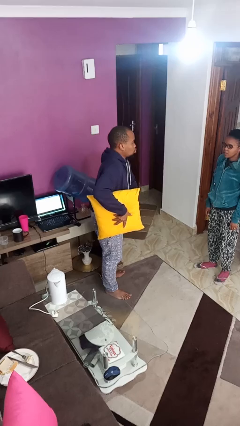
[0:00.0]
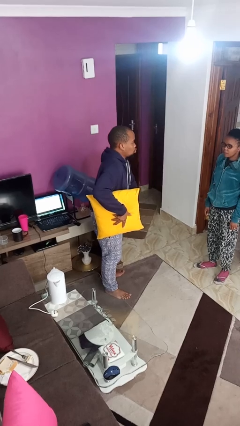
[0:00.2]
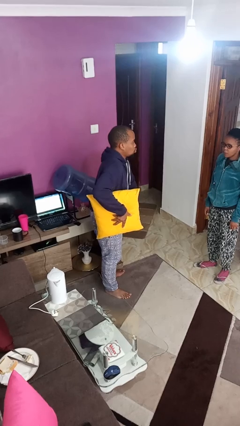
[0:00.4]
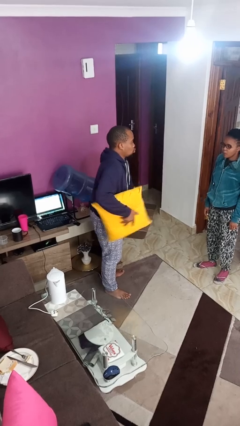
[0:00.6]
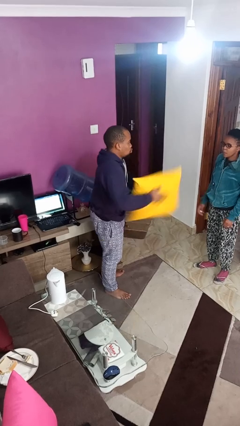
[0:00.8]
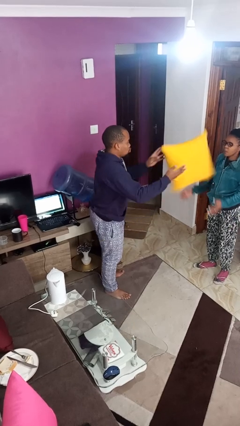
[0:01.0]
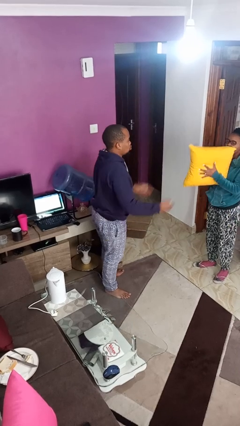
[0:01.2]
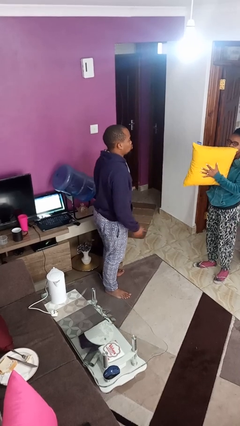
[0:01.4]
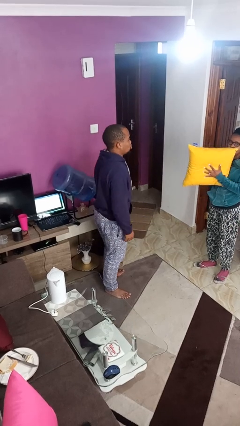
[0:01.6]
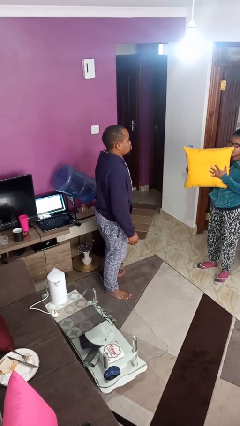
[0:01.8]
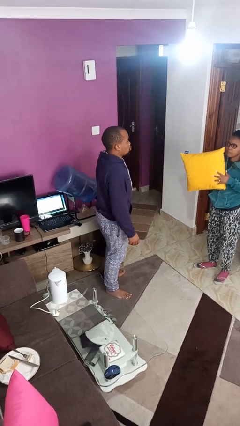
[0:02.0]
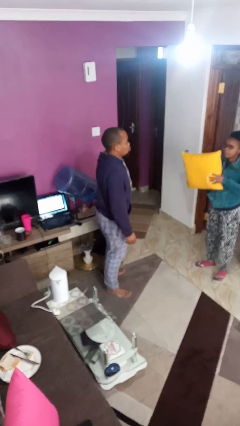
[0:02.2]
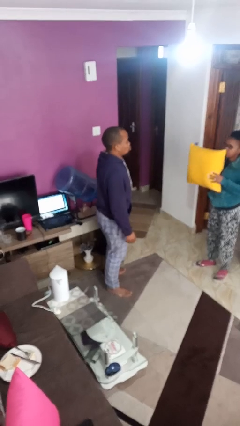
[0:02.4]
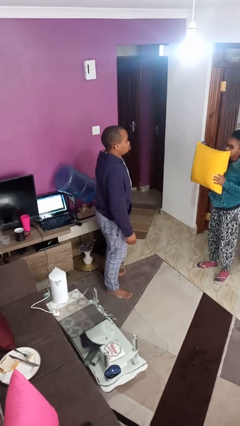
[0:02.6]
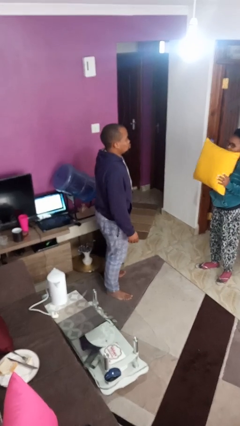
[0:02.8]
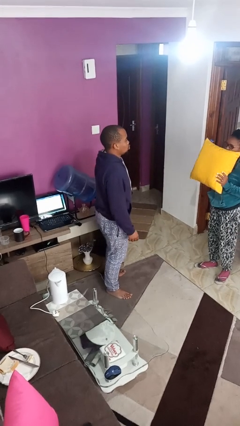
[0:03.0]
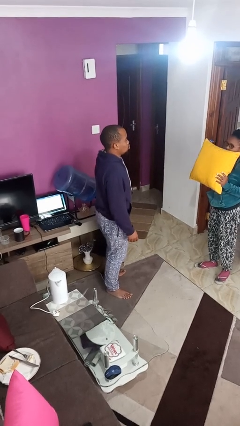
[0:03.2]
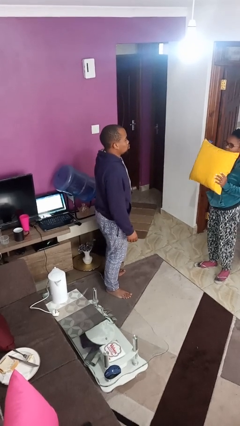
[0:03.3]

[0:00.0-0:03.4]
person throws object to person

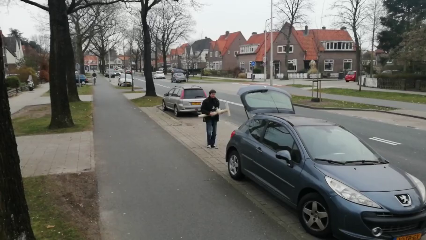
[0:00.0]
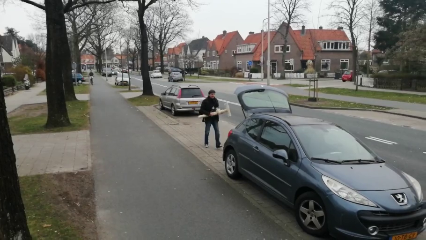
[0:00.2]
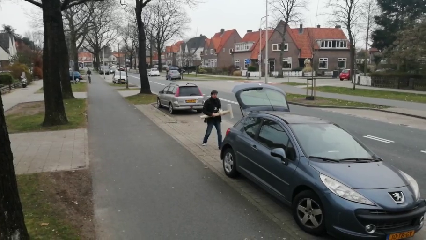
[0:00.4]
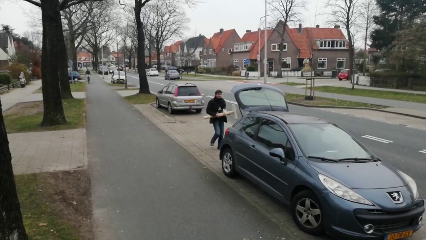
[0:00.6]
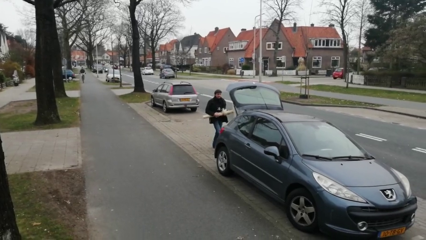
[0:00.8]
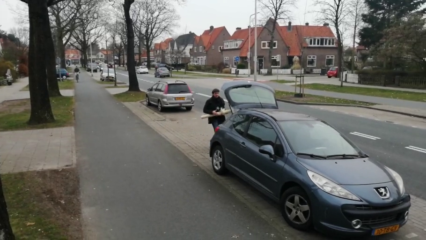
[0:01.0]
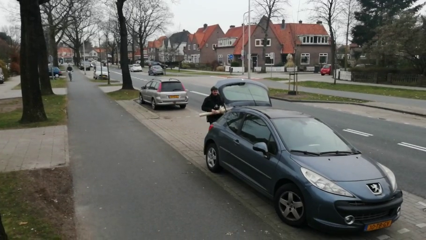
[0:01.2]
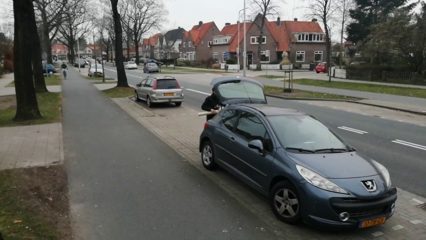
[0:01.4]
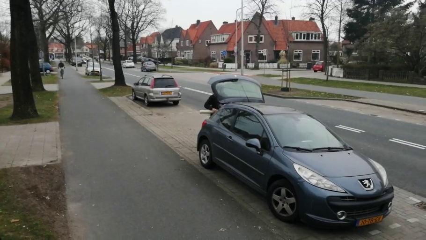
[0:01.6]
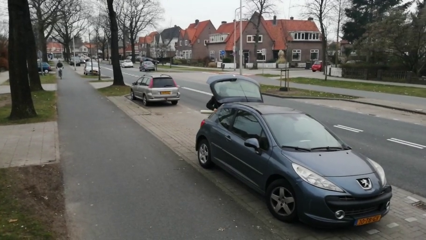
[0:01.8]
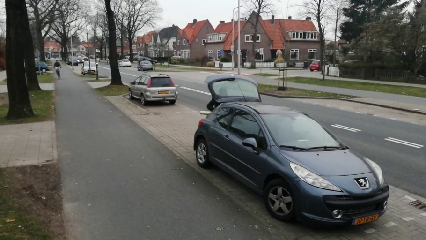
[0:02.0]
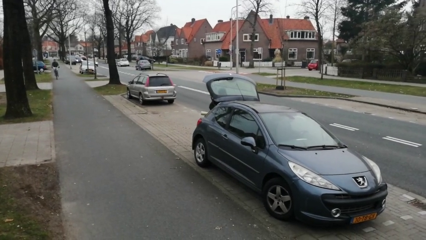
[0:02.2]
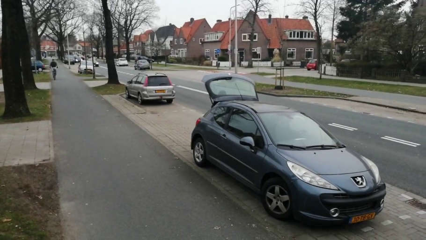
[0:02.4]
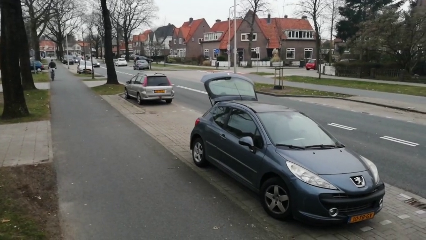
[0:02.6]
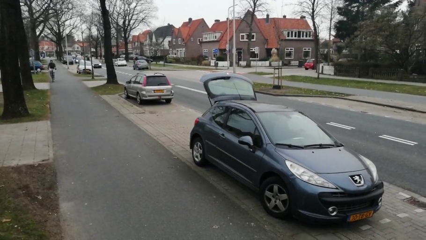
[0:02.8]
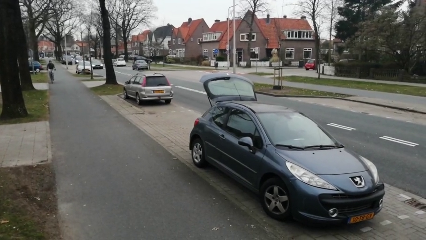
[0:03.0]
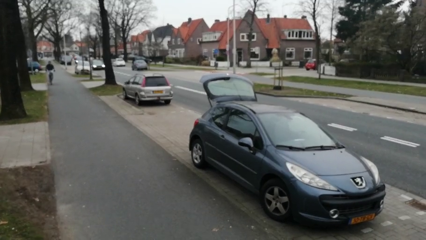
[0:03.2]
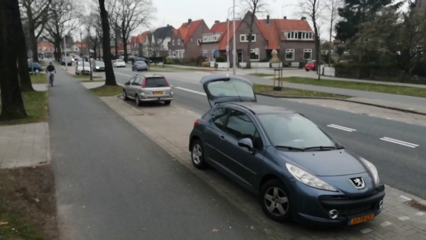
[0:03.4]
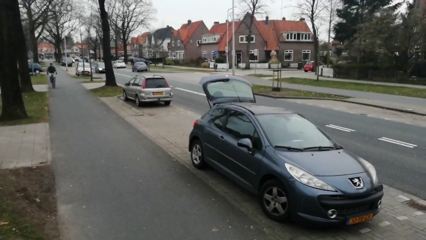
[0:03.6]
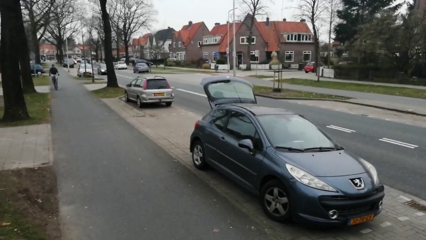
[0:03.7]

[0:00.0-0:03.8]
person loads car

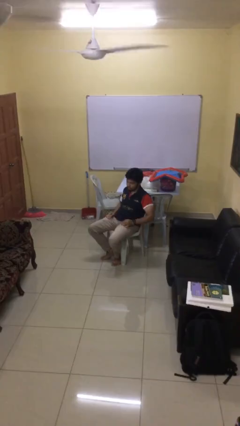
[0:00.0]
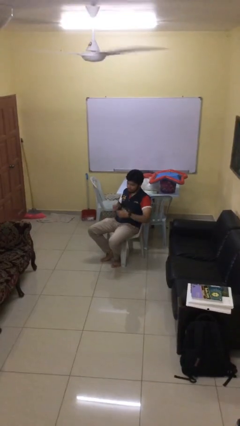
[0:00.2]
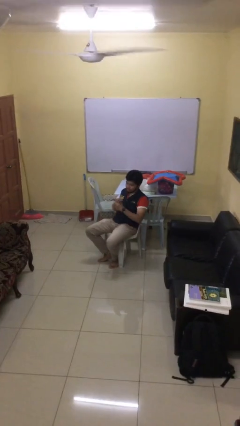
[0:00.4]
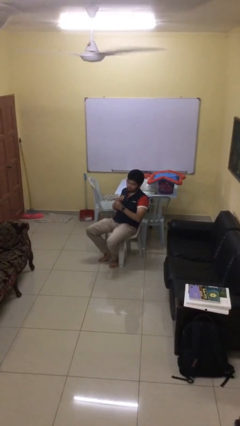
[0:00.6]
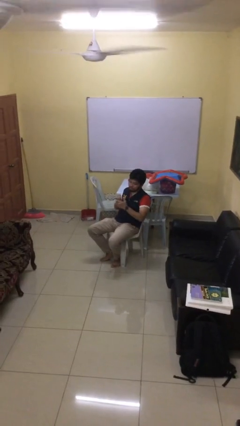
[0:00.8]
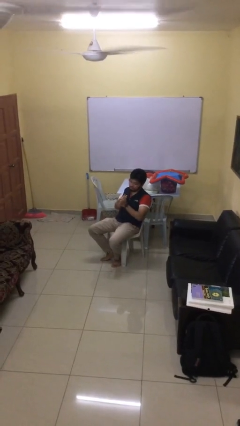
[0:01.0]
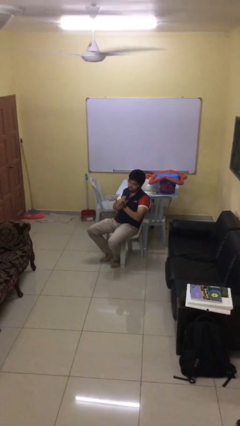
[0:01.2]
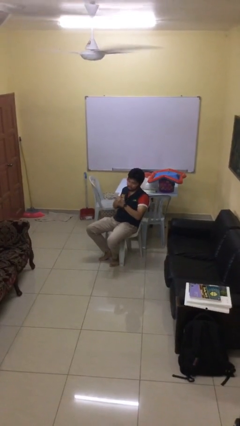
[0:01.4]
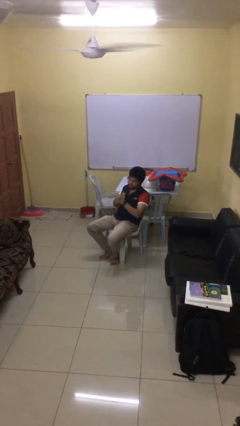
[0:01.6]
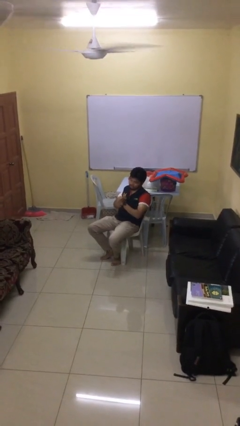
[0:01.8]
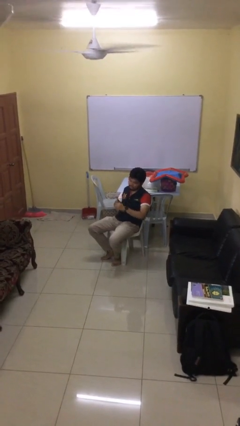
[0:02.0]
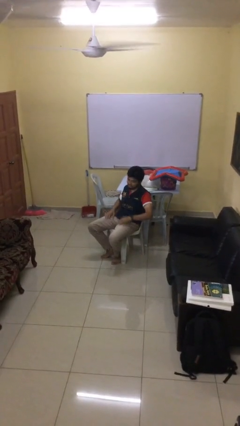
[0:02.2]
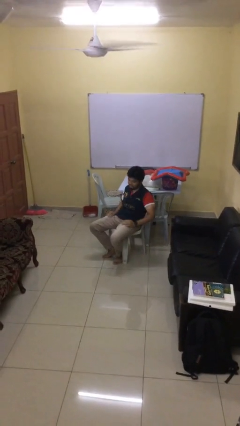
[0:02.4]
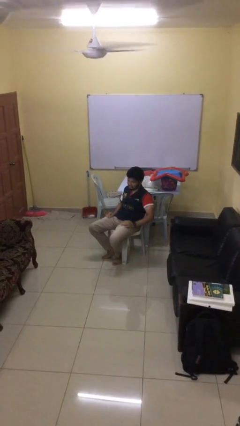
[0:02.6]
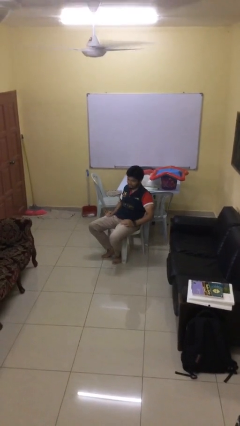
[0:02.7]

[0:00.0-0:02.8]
person cracks knuckles

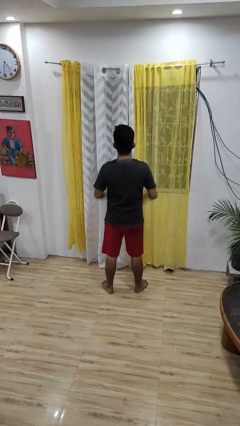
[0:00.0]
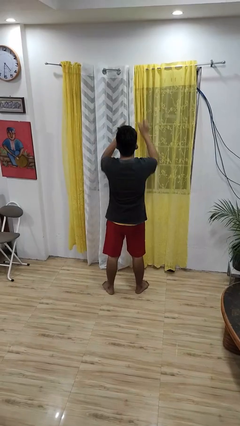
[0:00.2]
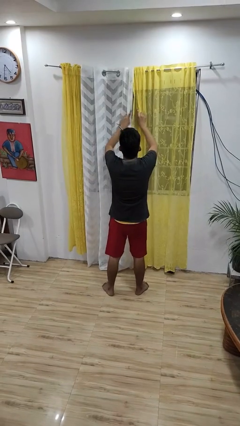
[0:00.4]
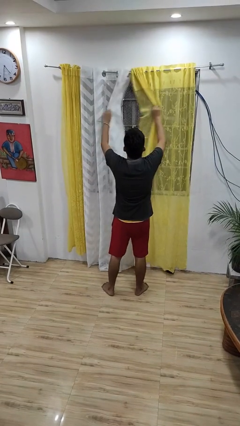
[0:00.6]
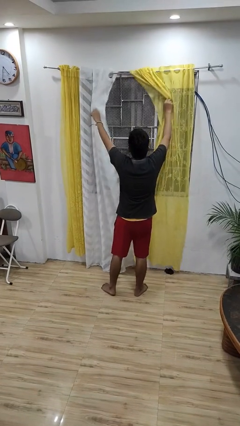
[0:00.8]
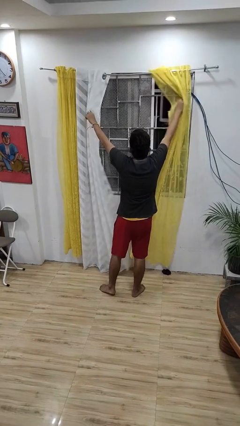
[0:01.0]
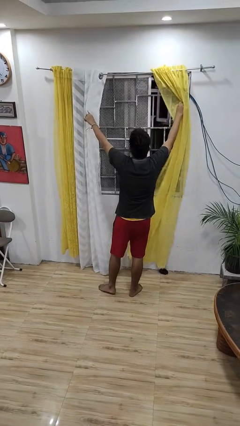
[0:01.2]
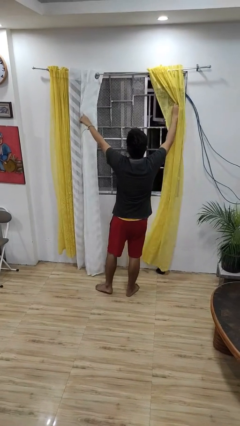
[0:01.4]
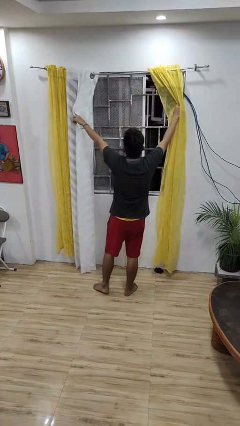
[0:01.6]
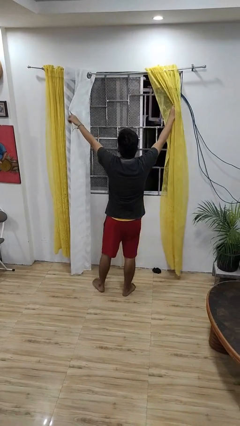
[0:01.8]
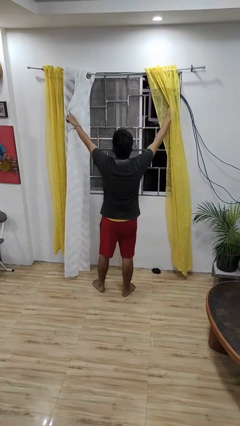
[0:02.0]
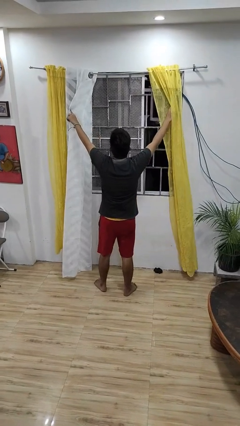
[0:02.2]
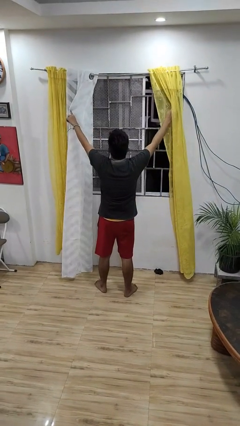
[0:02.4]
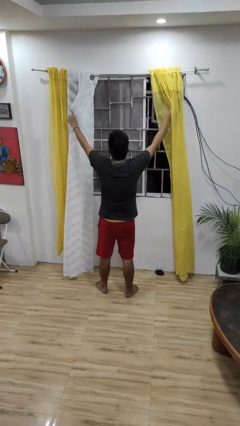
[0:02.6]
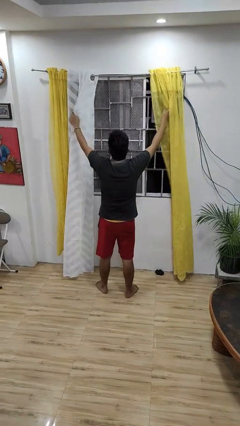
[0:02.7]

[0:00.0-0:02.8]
person opens curtains

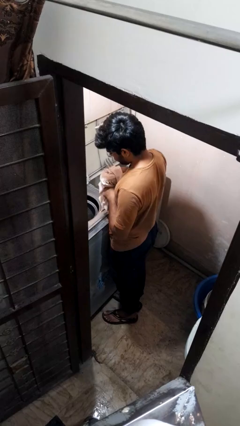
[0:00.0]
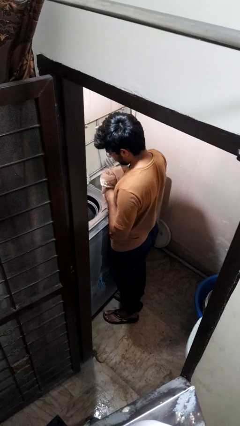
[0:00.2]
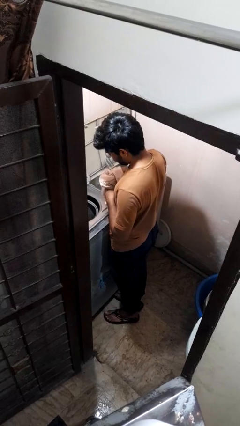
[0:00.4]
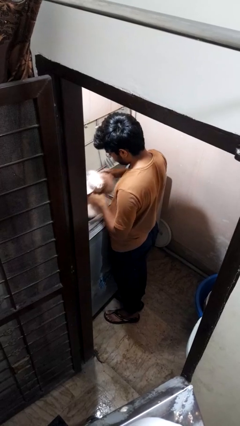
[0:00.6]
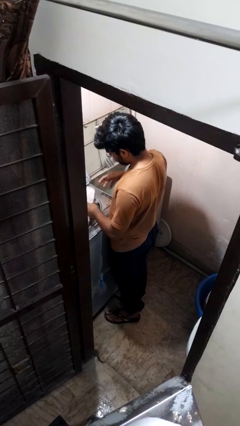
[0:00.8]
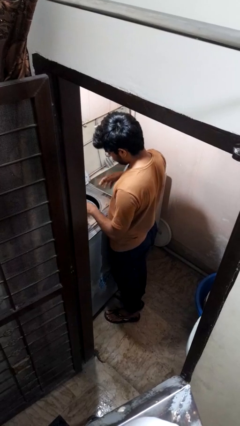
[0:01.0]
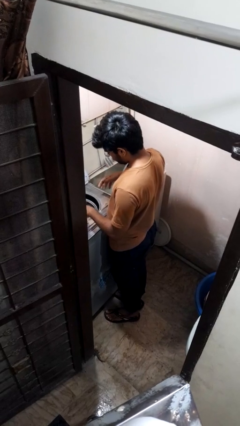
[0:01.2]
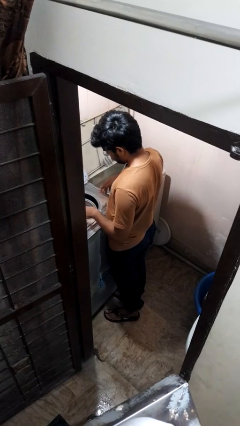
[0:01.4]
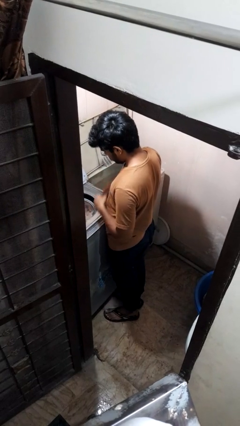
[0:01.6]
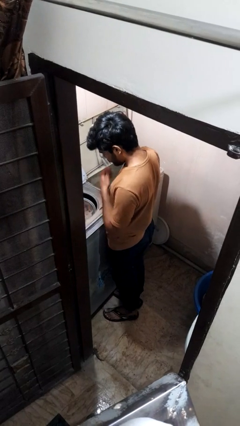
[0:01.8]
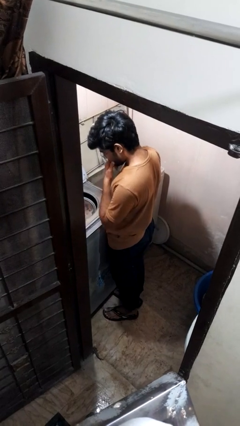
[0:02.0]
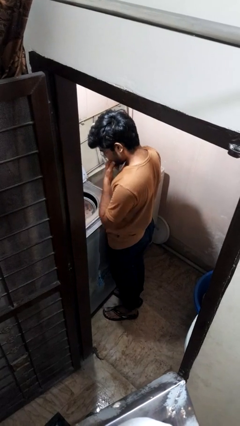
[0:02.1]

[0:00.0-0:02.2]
person loads dryer

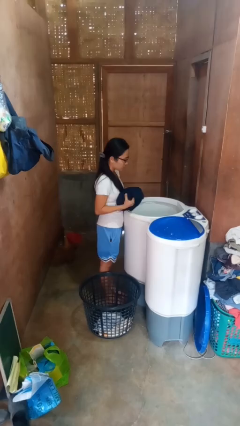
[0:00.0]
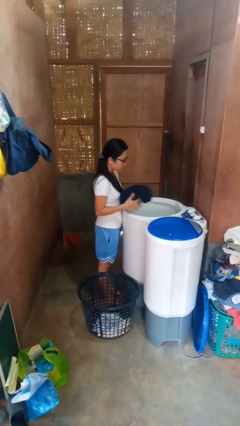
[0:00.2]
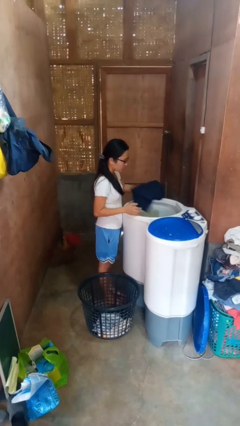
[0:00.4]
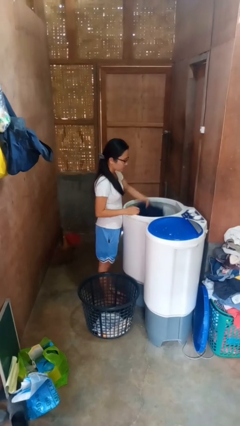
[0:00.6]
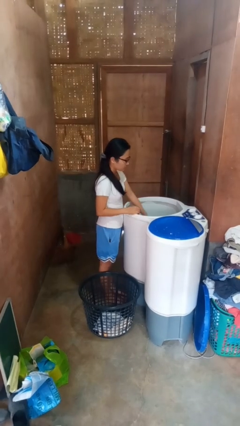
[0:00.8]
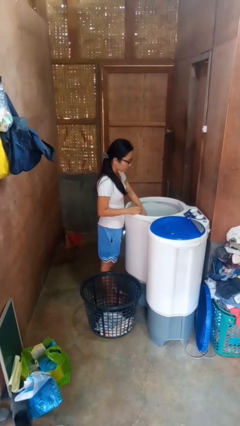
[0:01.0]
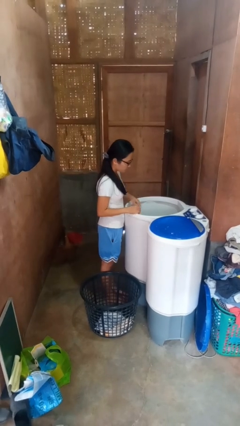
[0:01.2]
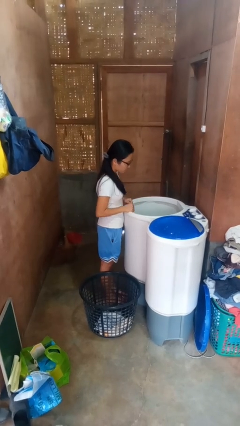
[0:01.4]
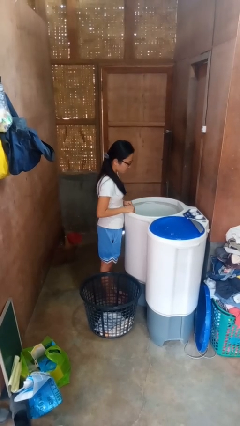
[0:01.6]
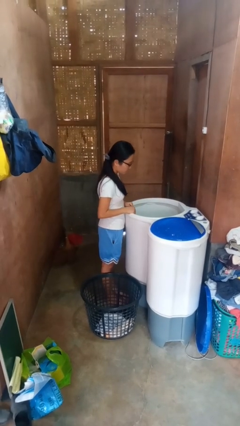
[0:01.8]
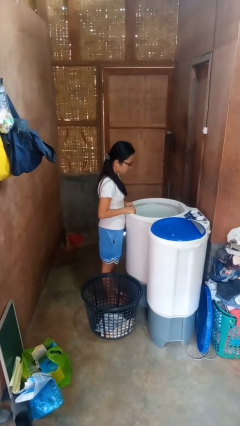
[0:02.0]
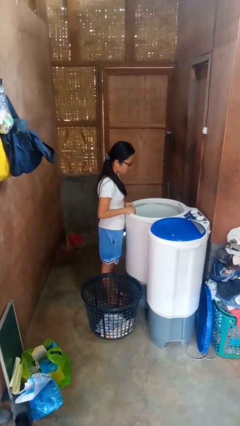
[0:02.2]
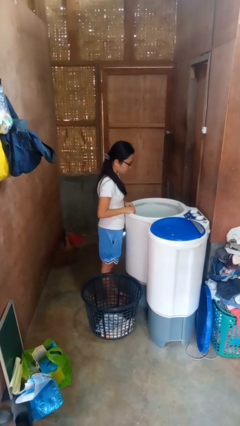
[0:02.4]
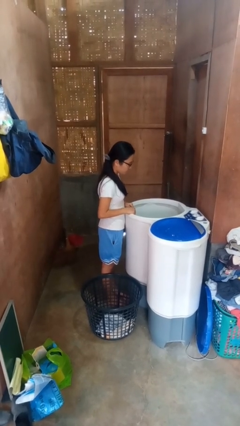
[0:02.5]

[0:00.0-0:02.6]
person loads clotheswasher
